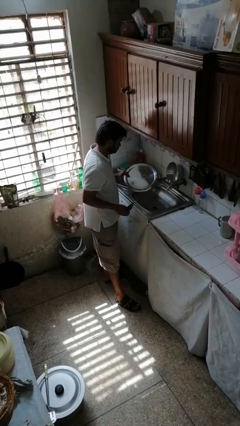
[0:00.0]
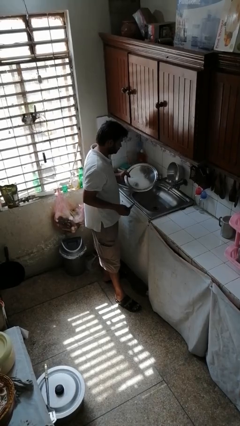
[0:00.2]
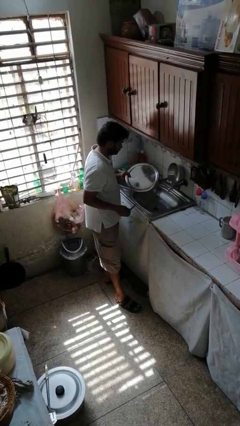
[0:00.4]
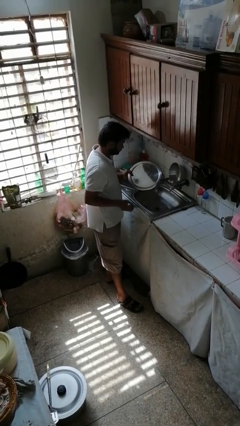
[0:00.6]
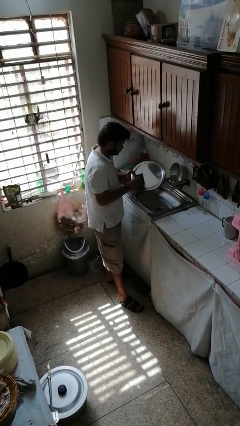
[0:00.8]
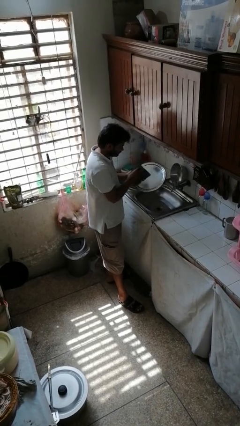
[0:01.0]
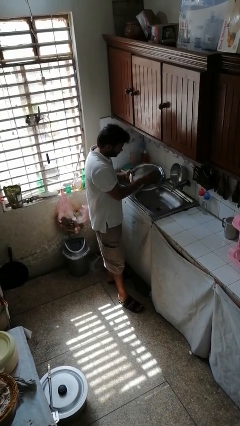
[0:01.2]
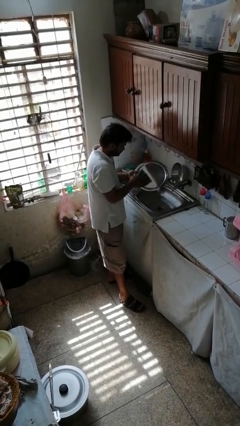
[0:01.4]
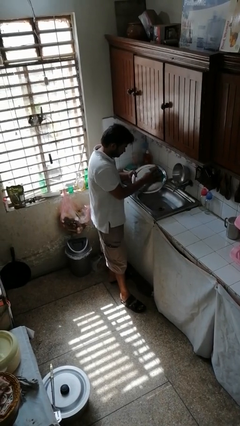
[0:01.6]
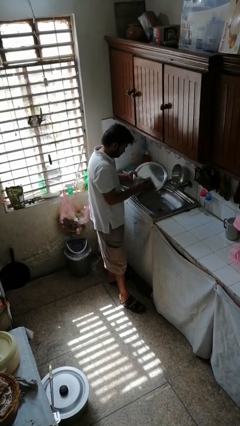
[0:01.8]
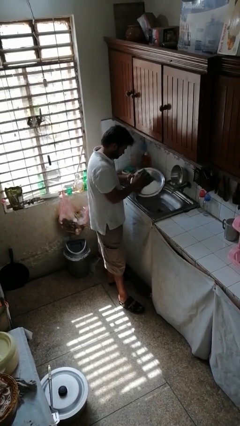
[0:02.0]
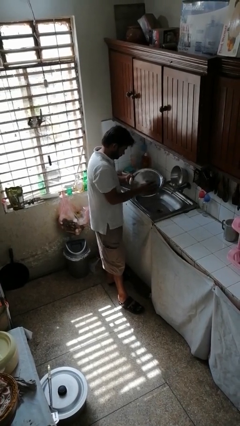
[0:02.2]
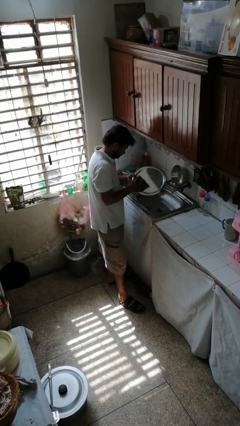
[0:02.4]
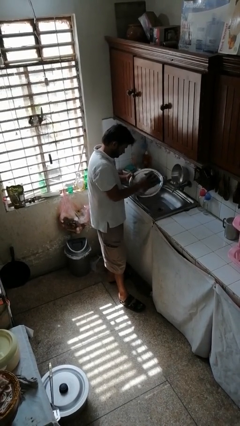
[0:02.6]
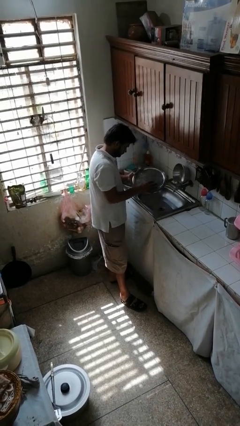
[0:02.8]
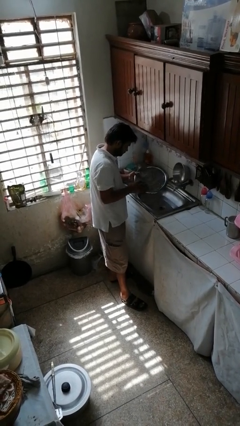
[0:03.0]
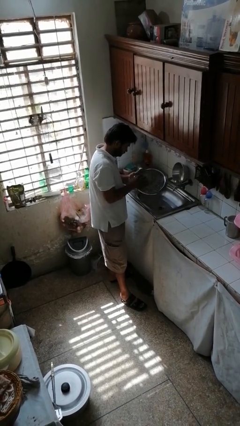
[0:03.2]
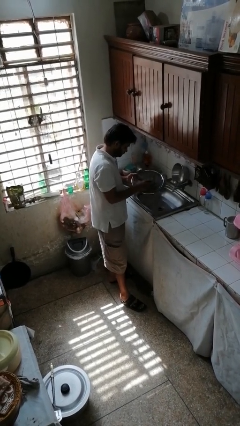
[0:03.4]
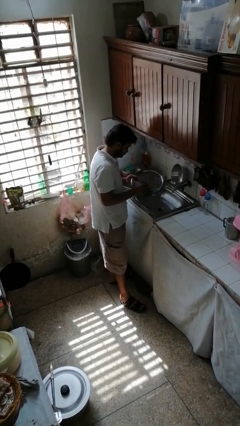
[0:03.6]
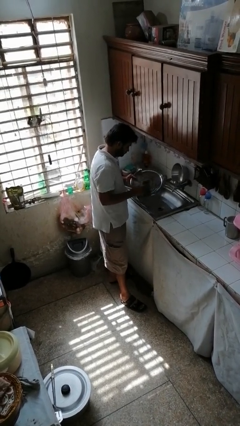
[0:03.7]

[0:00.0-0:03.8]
person washes dish

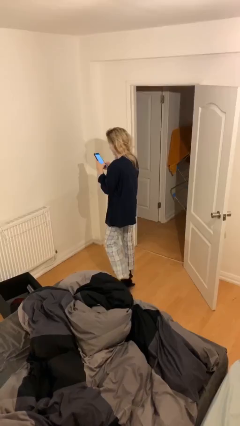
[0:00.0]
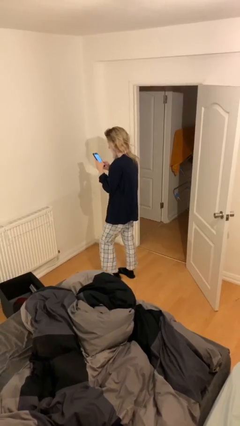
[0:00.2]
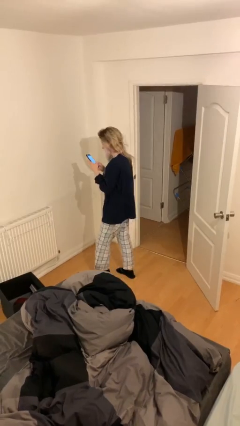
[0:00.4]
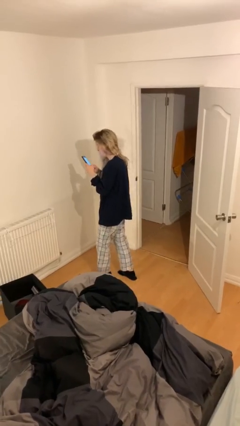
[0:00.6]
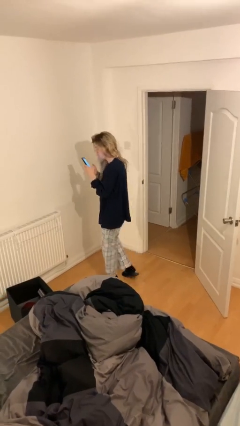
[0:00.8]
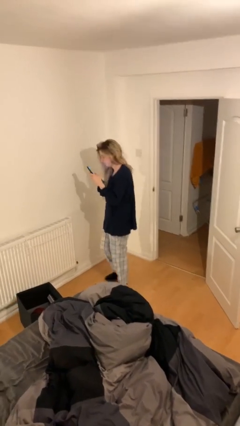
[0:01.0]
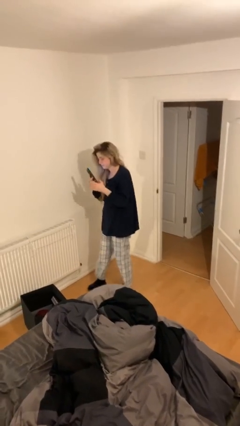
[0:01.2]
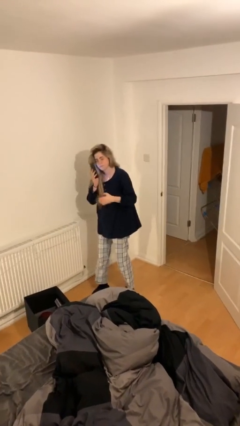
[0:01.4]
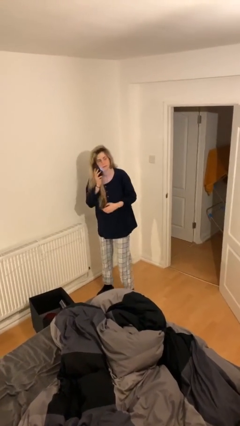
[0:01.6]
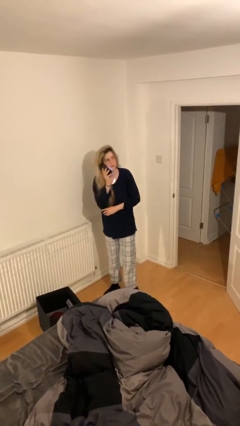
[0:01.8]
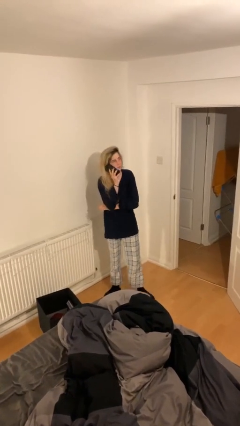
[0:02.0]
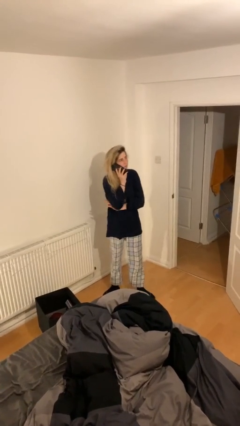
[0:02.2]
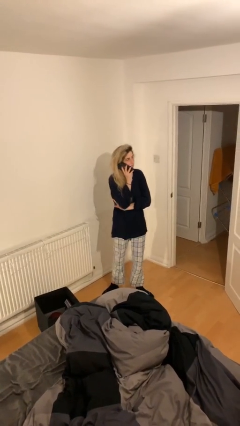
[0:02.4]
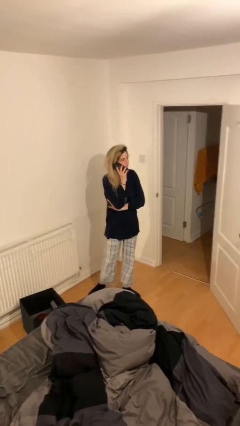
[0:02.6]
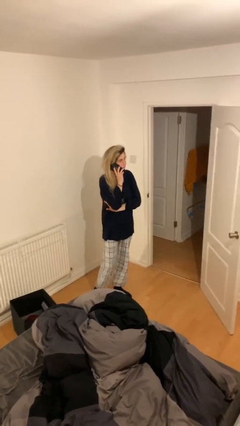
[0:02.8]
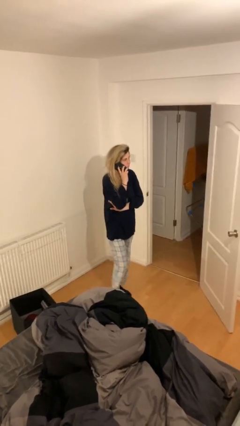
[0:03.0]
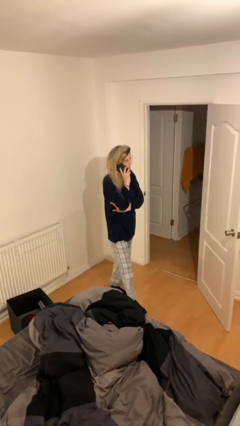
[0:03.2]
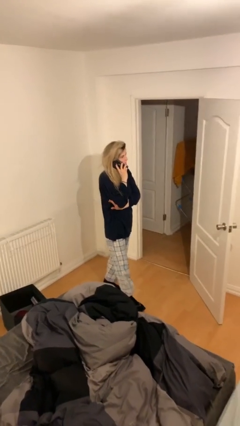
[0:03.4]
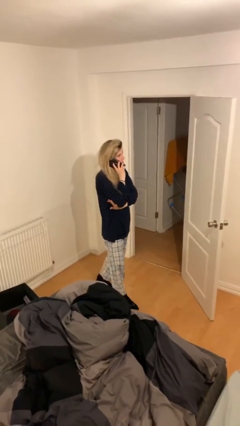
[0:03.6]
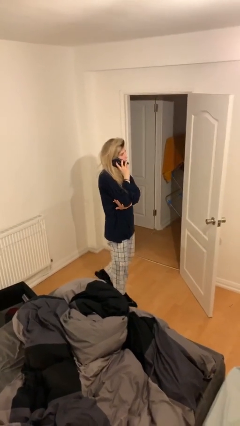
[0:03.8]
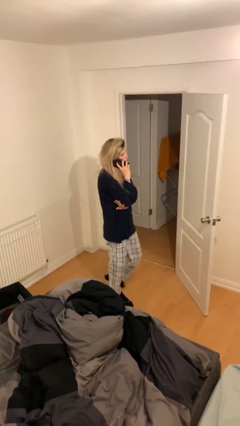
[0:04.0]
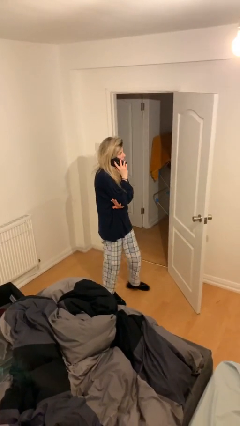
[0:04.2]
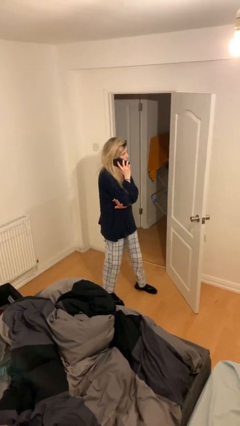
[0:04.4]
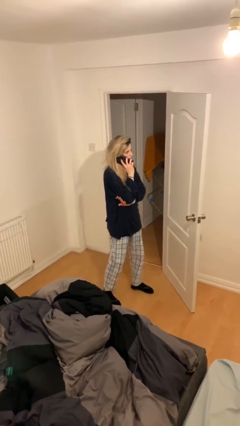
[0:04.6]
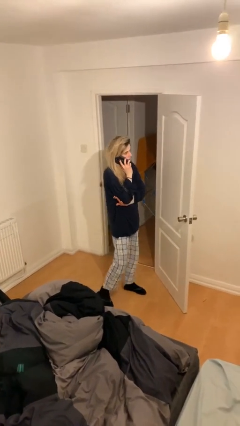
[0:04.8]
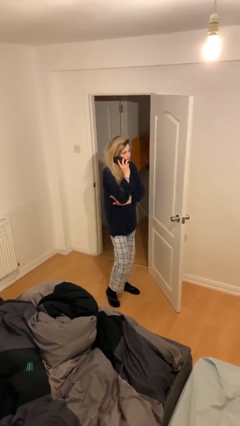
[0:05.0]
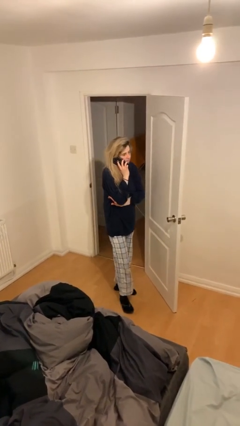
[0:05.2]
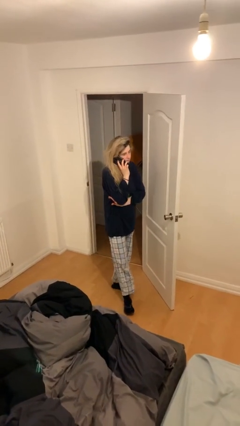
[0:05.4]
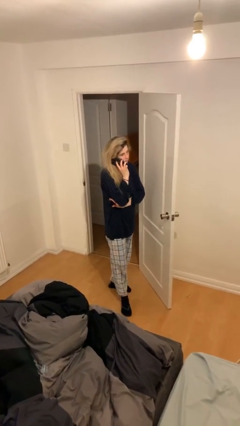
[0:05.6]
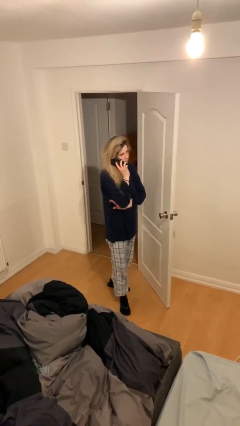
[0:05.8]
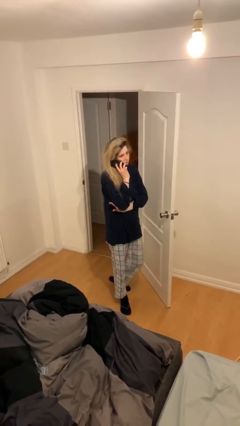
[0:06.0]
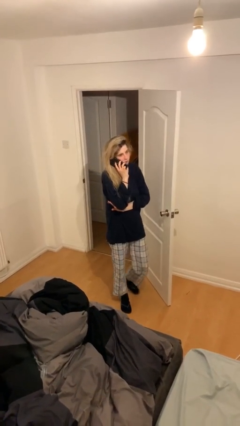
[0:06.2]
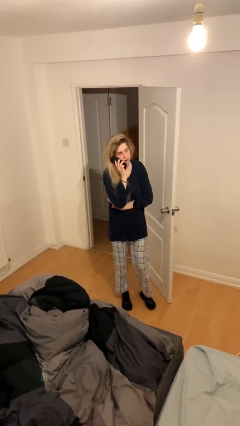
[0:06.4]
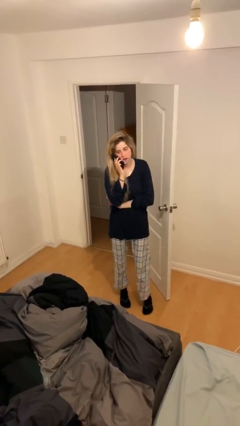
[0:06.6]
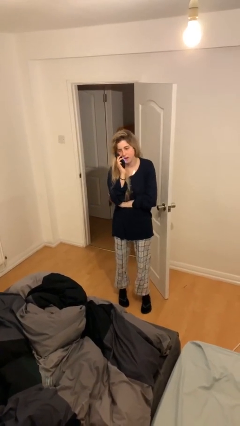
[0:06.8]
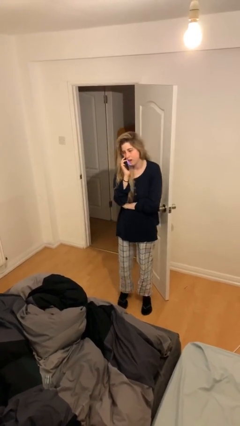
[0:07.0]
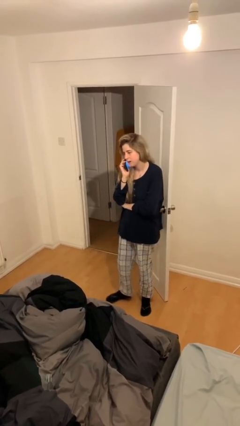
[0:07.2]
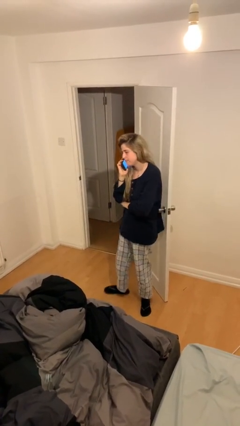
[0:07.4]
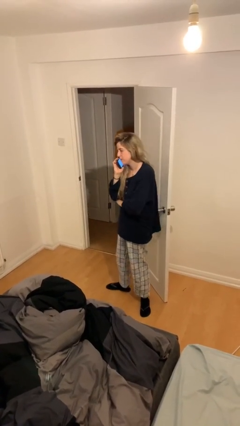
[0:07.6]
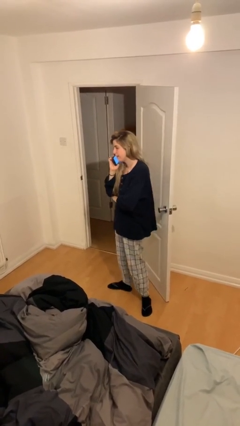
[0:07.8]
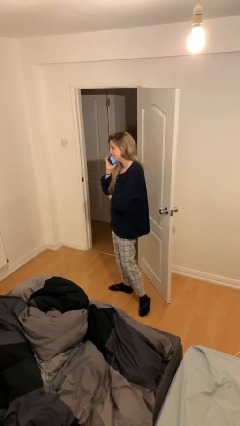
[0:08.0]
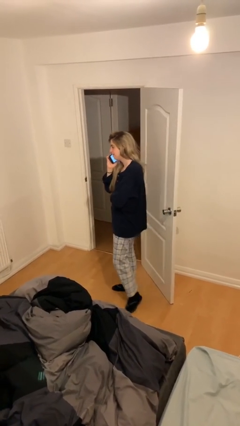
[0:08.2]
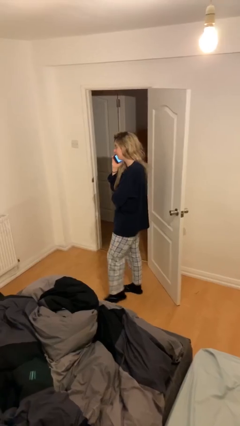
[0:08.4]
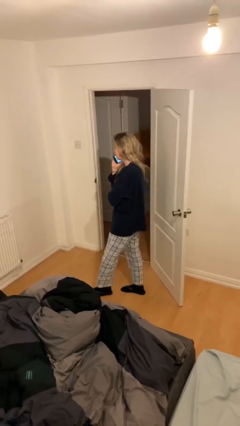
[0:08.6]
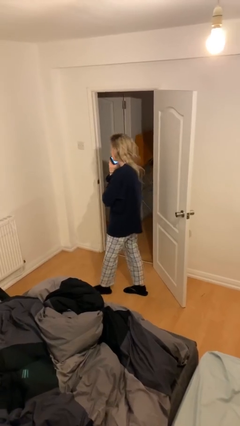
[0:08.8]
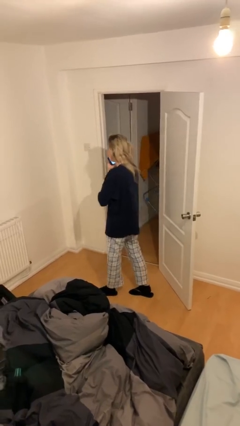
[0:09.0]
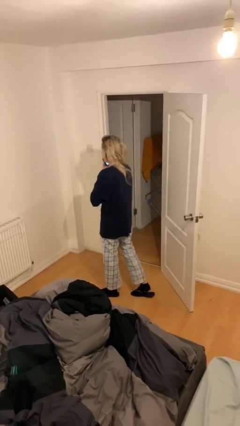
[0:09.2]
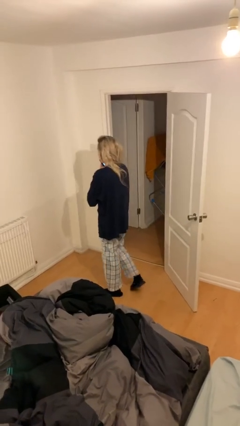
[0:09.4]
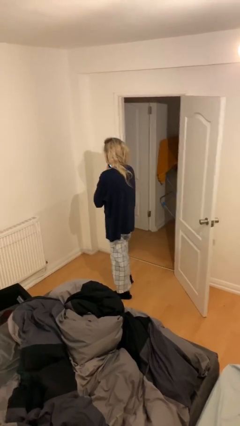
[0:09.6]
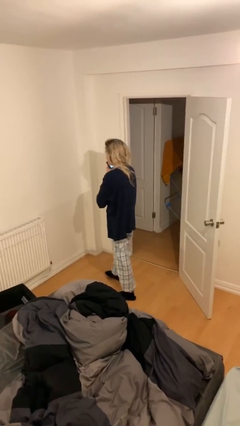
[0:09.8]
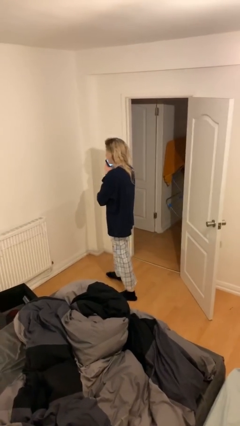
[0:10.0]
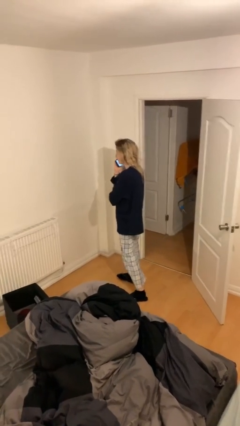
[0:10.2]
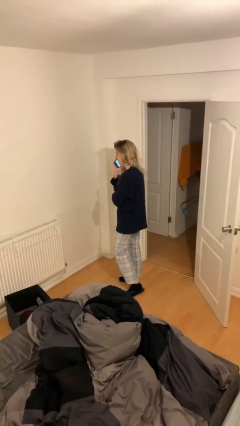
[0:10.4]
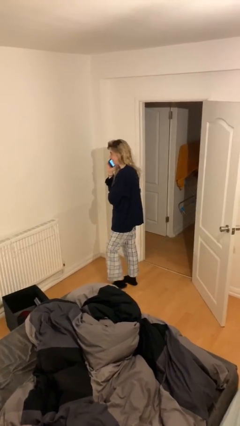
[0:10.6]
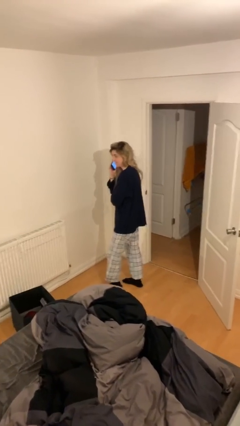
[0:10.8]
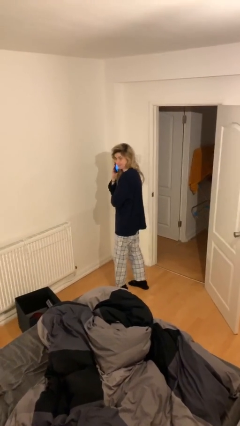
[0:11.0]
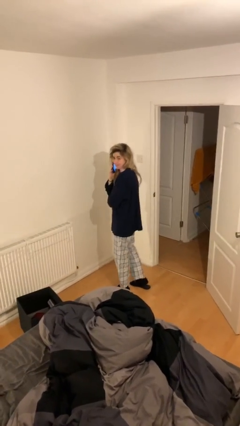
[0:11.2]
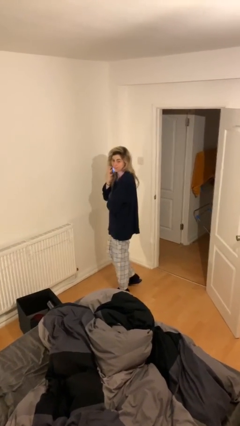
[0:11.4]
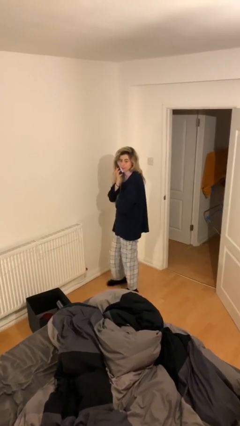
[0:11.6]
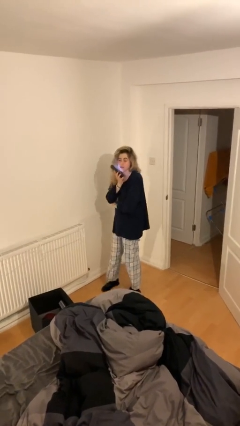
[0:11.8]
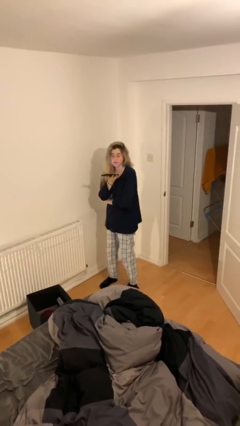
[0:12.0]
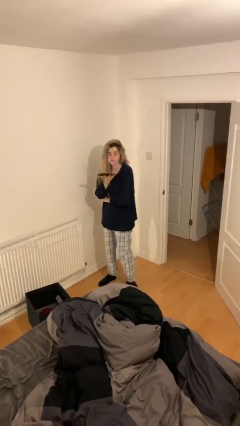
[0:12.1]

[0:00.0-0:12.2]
person talks on phone

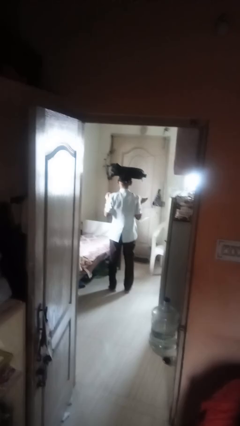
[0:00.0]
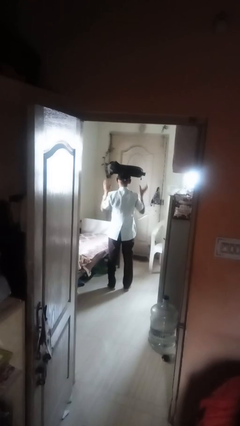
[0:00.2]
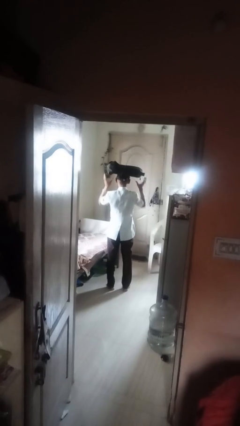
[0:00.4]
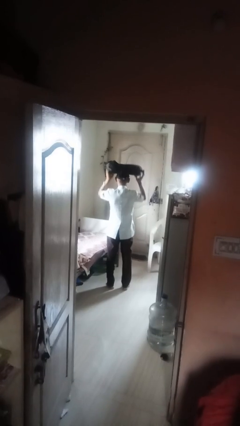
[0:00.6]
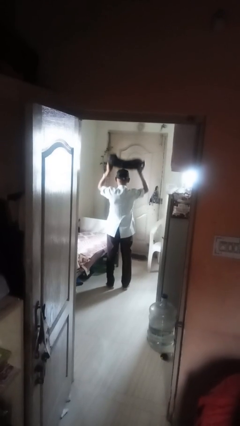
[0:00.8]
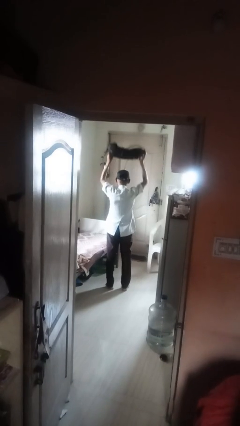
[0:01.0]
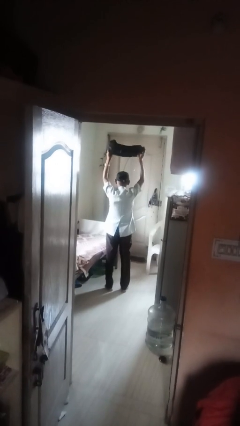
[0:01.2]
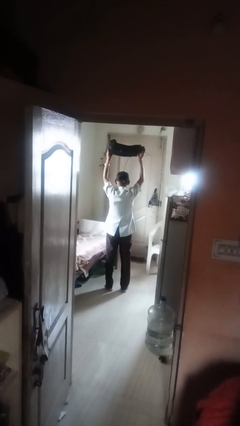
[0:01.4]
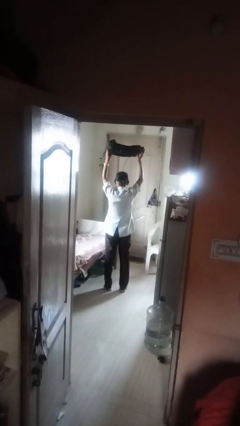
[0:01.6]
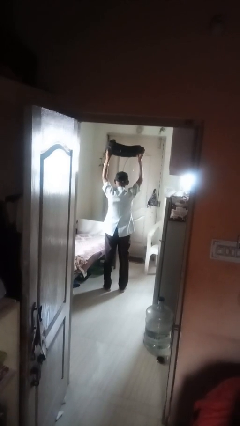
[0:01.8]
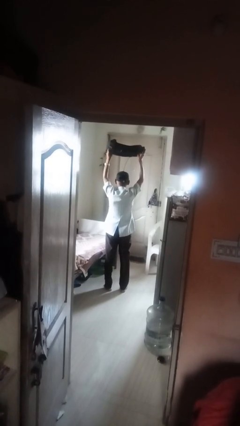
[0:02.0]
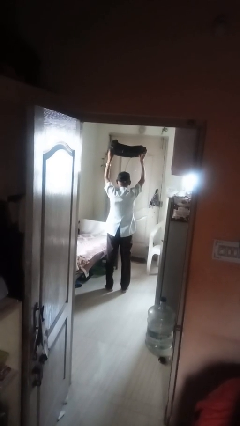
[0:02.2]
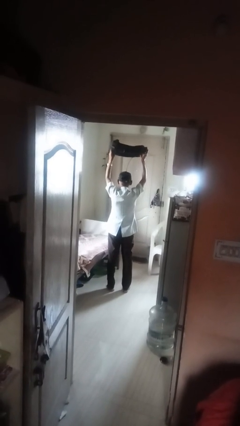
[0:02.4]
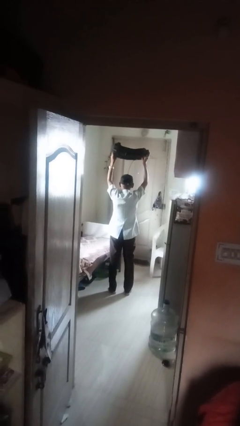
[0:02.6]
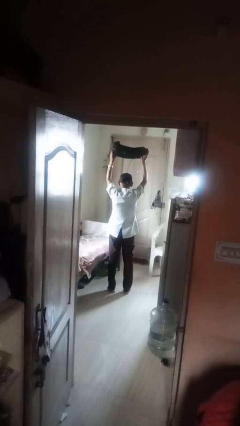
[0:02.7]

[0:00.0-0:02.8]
person holds object above head
